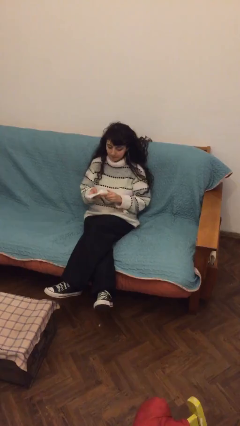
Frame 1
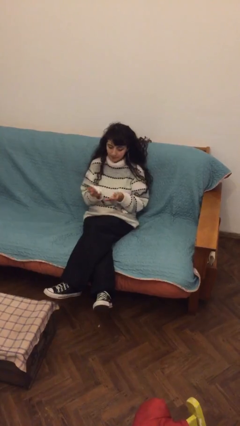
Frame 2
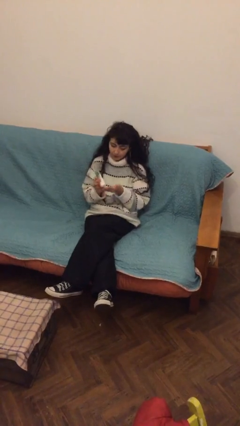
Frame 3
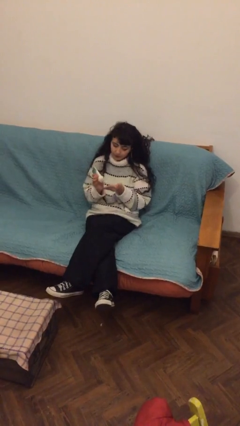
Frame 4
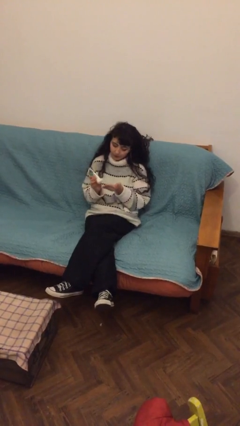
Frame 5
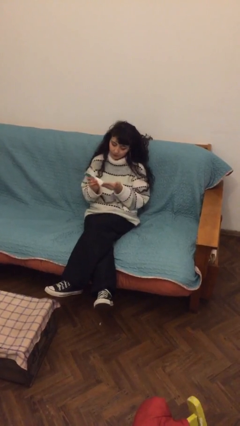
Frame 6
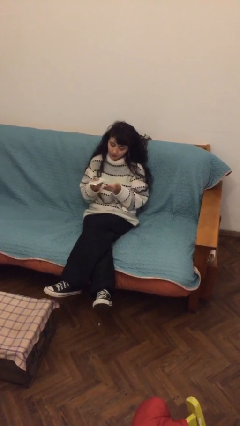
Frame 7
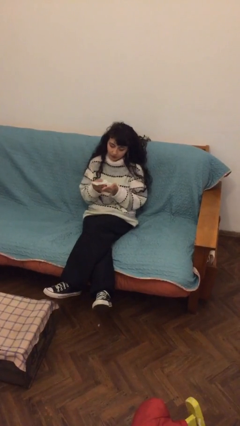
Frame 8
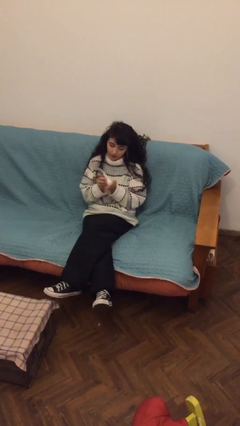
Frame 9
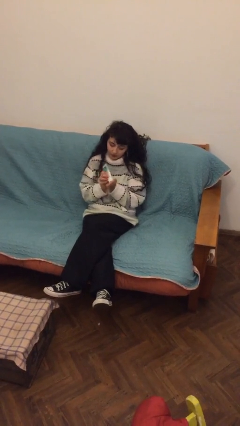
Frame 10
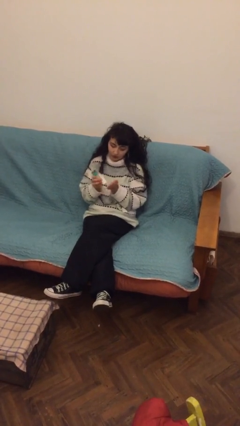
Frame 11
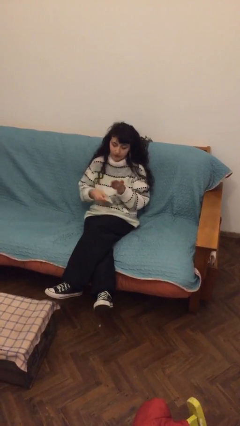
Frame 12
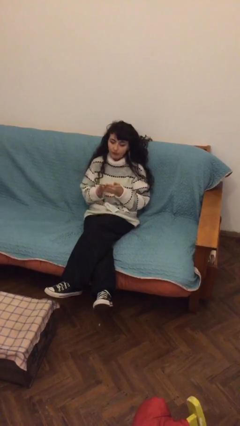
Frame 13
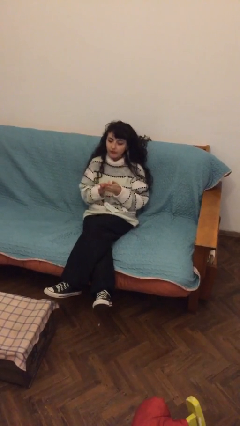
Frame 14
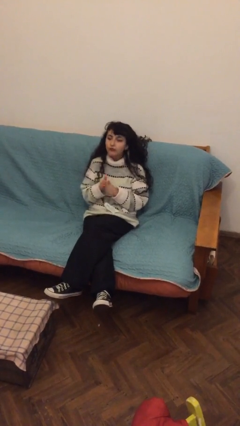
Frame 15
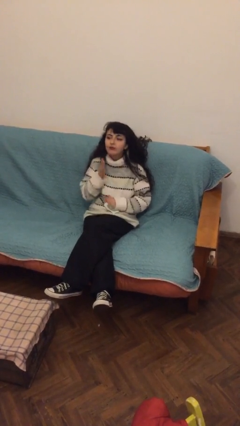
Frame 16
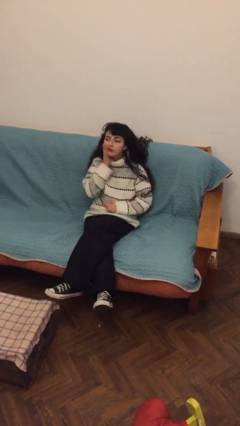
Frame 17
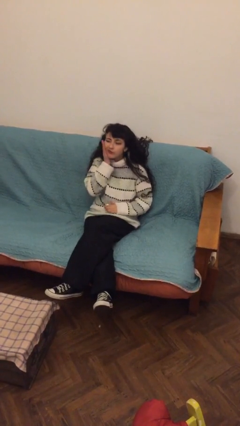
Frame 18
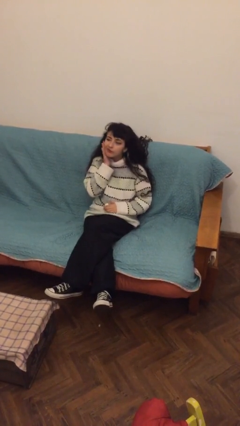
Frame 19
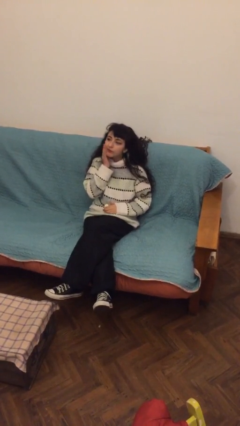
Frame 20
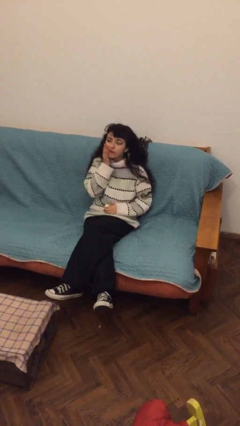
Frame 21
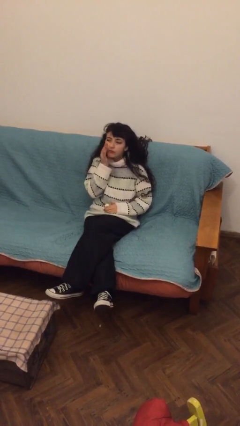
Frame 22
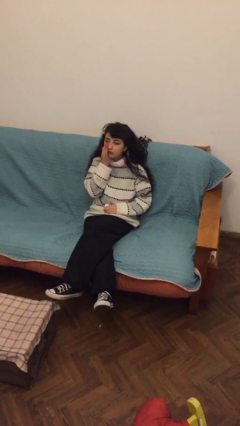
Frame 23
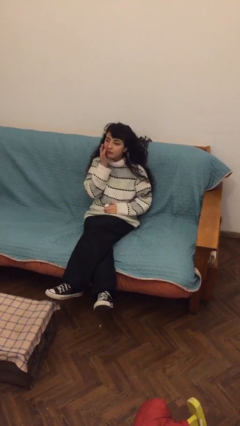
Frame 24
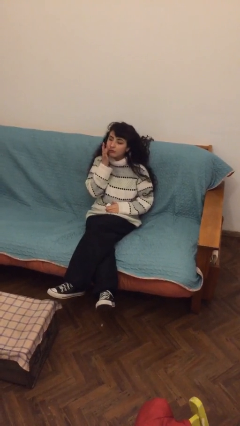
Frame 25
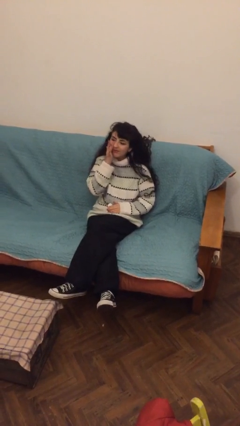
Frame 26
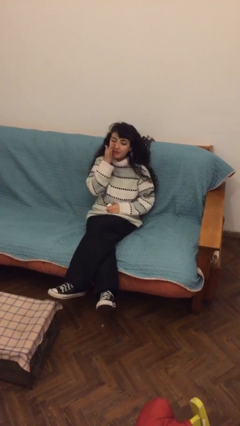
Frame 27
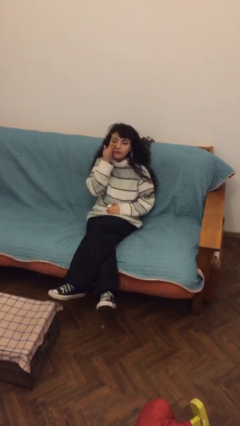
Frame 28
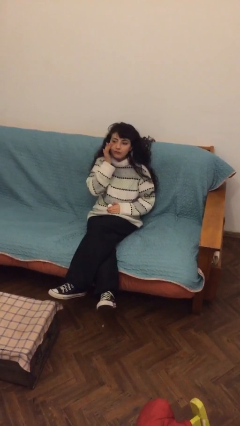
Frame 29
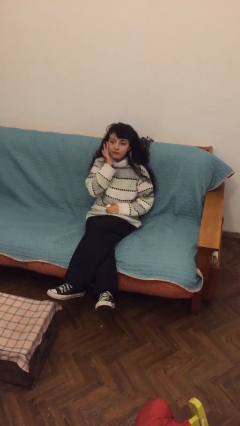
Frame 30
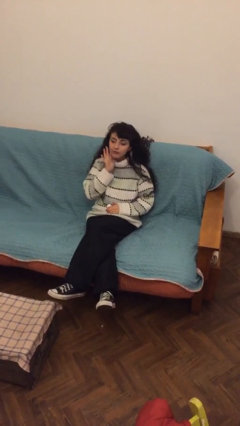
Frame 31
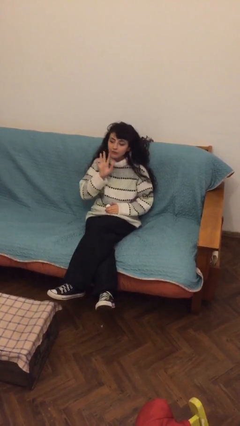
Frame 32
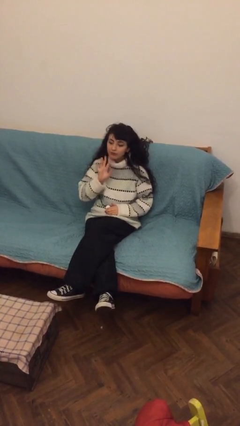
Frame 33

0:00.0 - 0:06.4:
person applies facial moisturizer

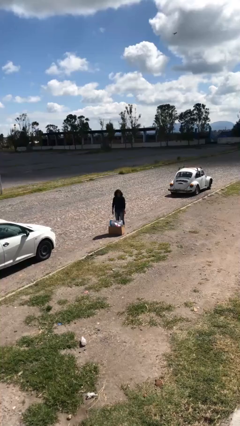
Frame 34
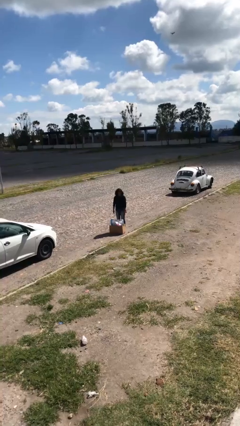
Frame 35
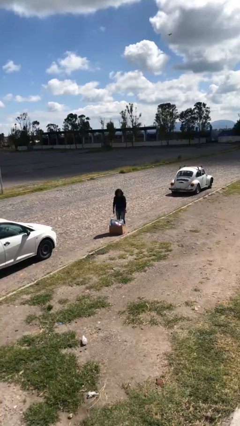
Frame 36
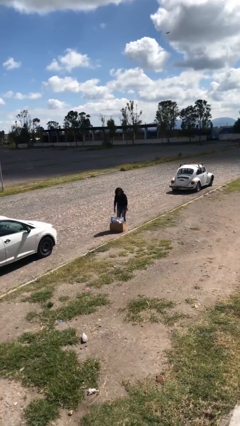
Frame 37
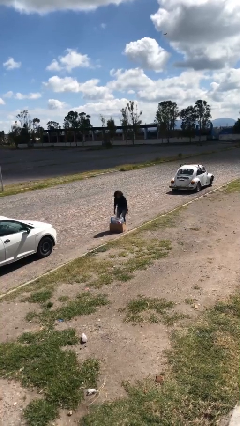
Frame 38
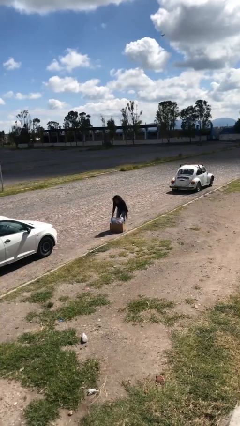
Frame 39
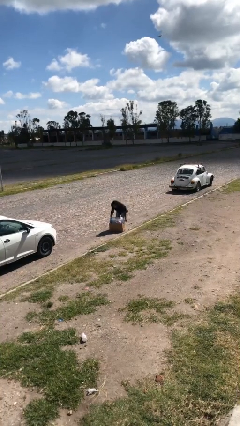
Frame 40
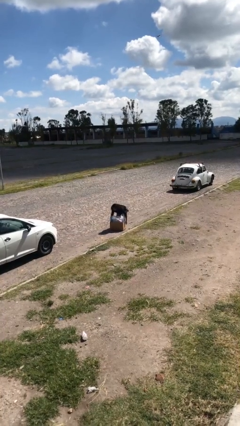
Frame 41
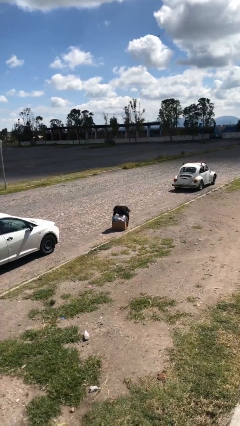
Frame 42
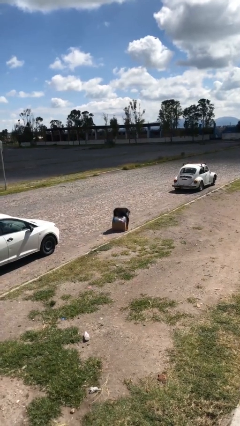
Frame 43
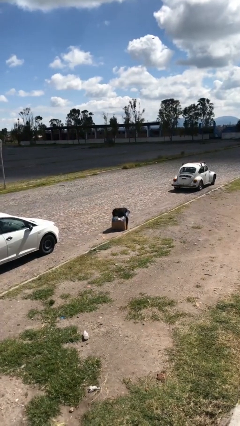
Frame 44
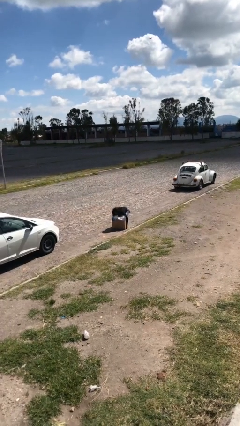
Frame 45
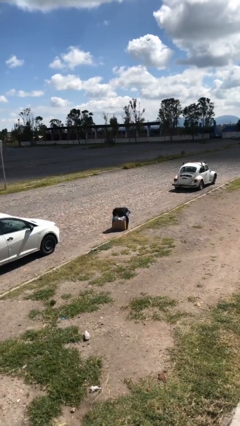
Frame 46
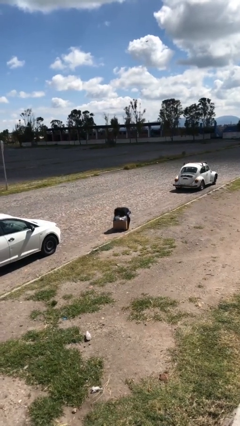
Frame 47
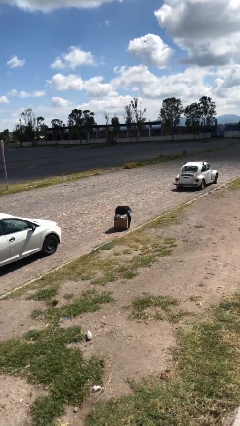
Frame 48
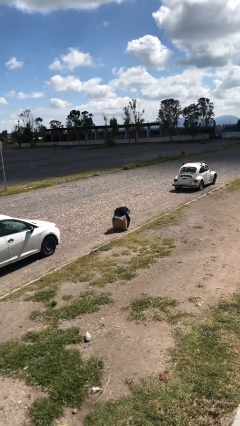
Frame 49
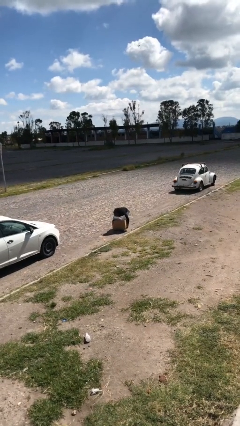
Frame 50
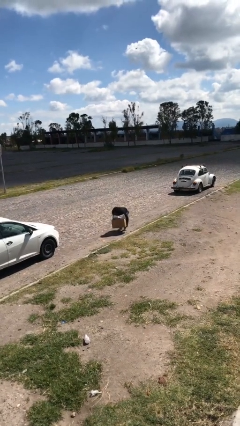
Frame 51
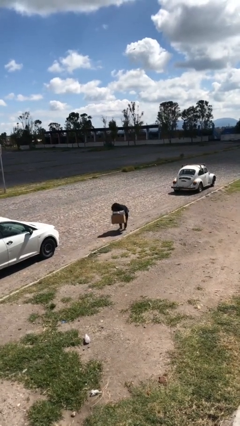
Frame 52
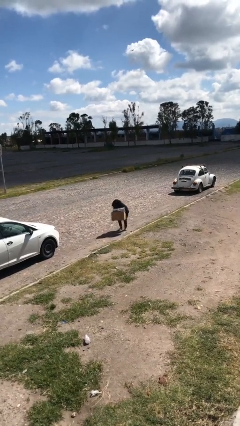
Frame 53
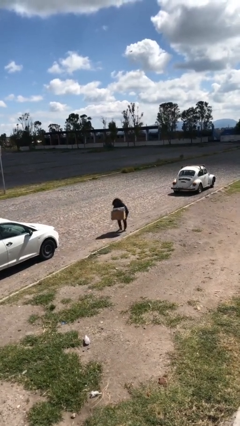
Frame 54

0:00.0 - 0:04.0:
person picks up object from floor

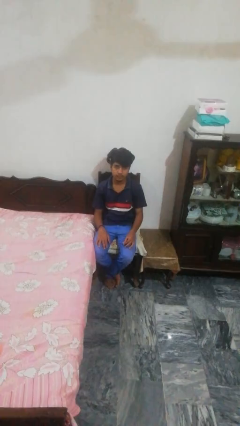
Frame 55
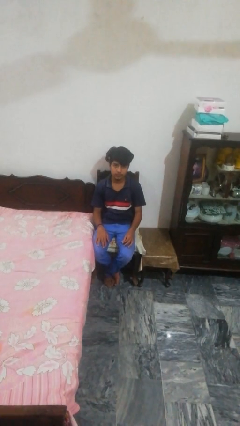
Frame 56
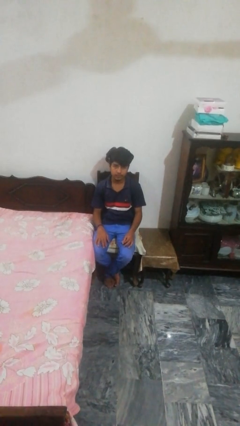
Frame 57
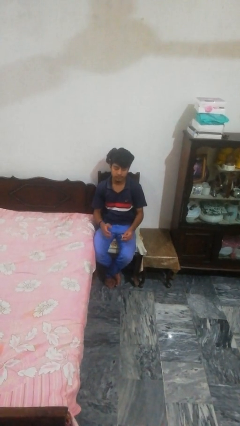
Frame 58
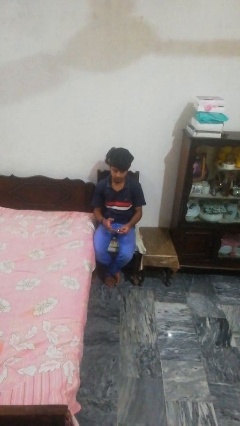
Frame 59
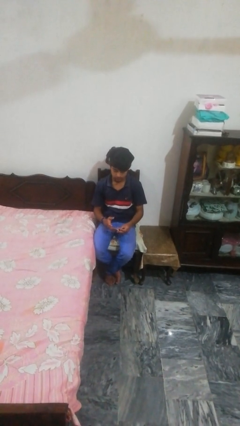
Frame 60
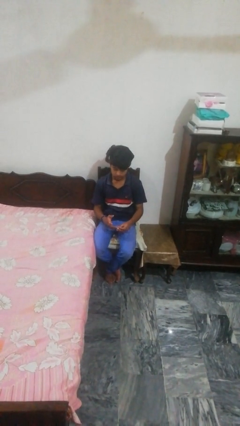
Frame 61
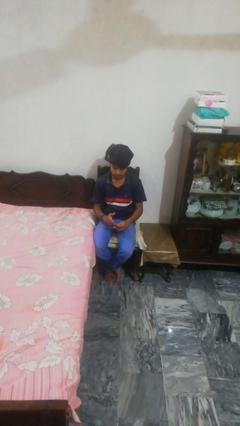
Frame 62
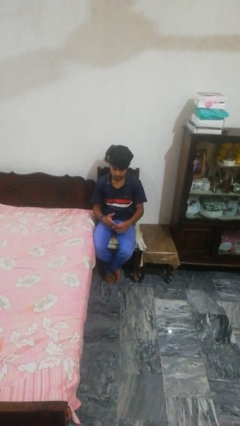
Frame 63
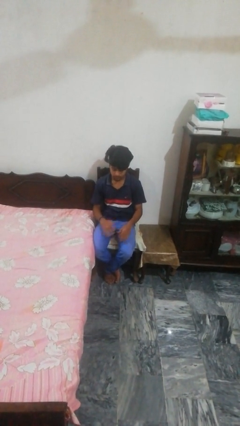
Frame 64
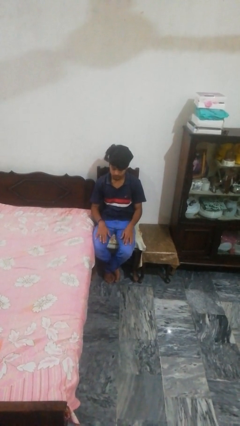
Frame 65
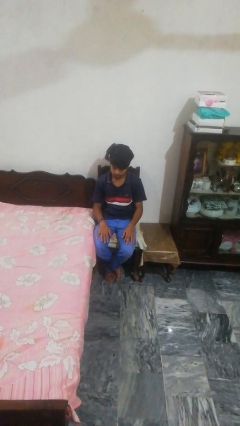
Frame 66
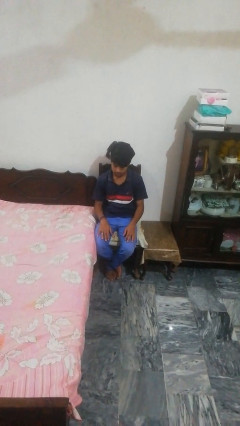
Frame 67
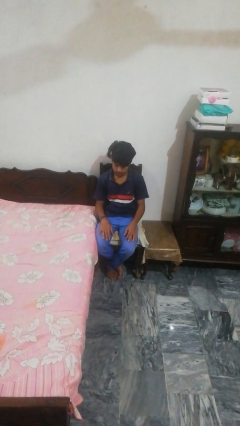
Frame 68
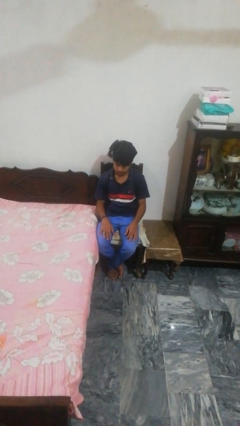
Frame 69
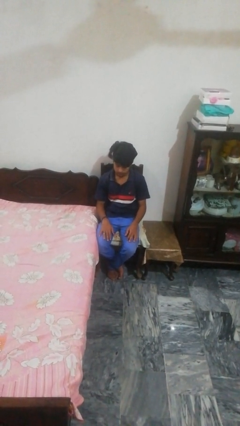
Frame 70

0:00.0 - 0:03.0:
person puts on ring

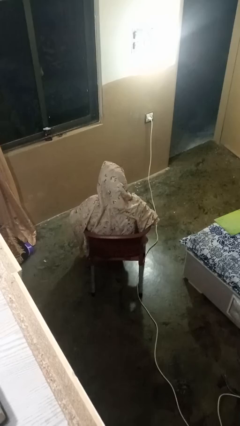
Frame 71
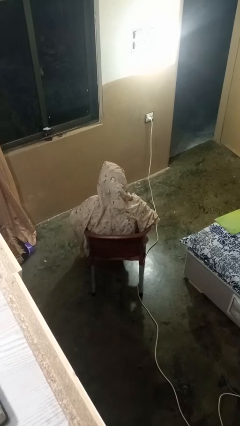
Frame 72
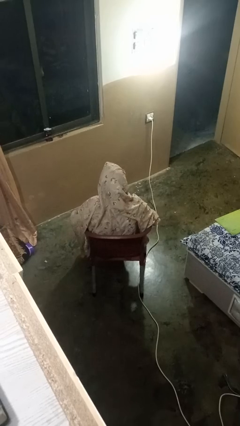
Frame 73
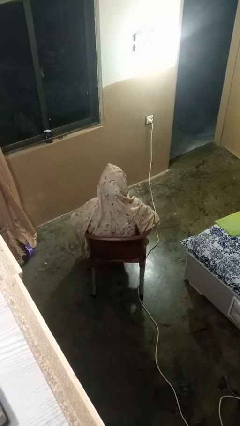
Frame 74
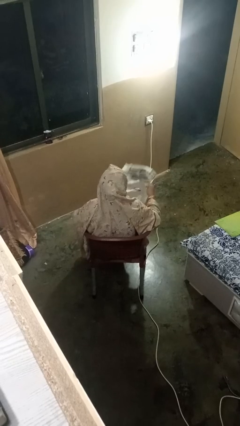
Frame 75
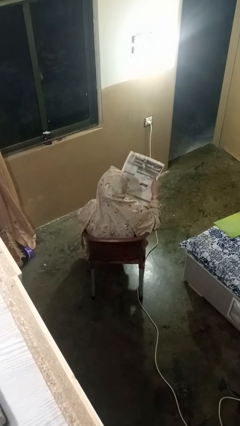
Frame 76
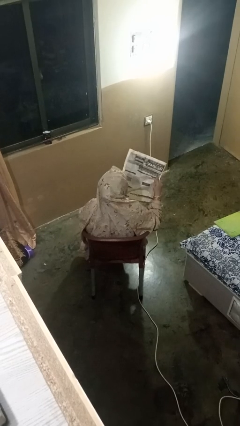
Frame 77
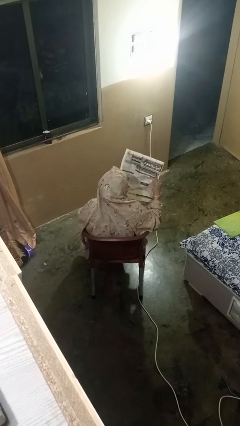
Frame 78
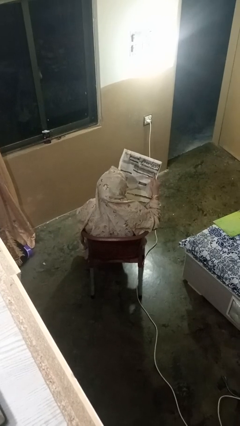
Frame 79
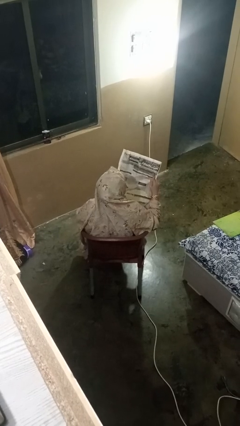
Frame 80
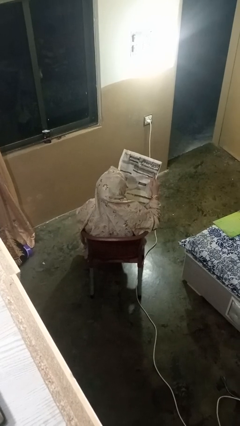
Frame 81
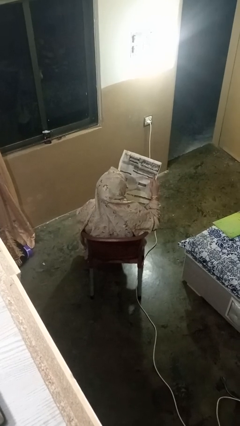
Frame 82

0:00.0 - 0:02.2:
person reads newspaper

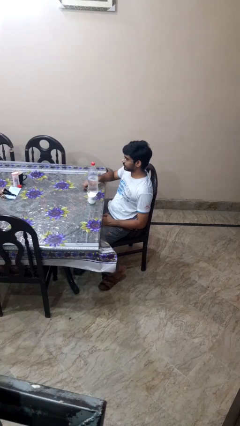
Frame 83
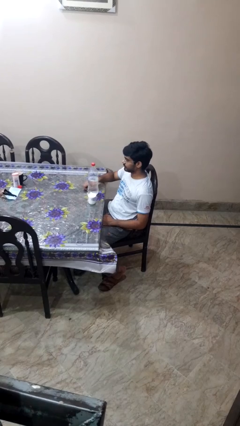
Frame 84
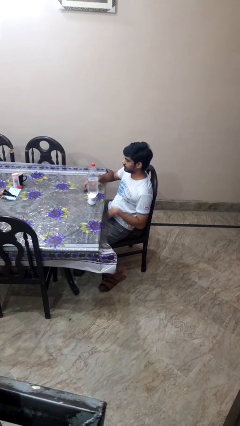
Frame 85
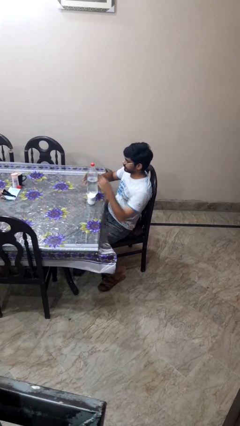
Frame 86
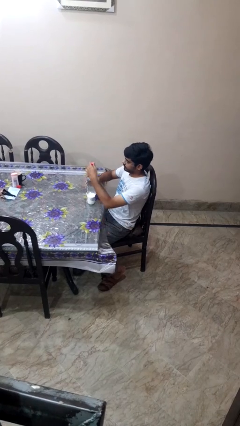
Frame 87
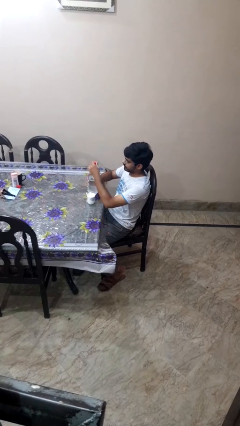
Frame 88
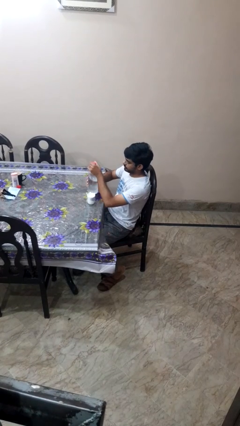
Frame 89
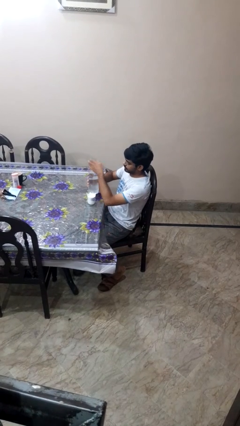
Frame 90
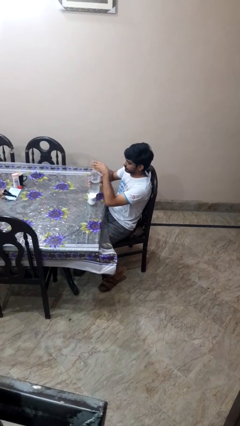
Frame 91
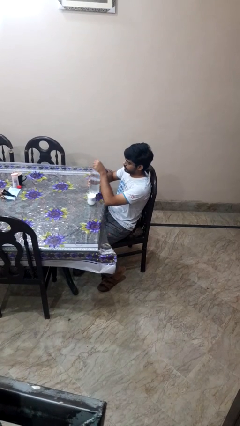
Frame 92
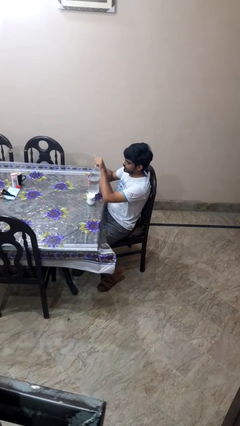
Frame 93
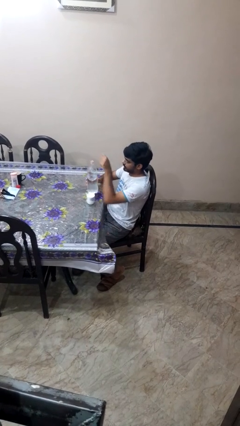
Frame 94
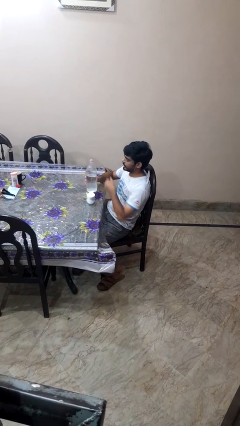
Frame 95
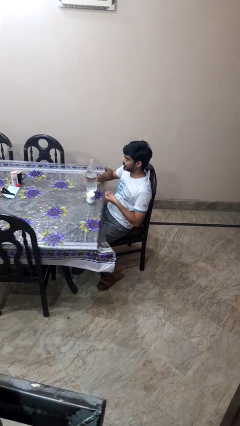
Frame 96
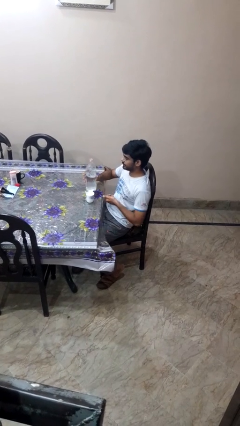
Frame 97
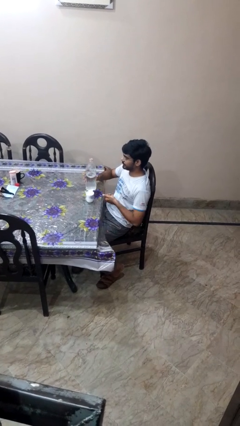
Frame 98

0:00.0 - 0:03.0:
person unscrews lid from bottle
